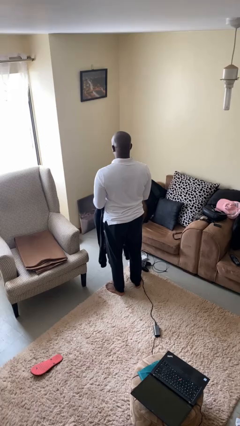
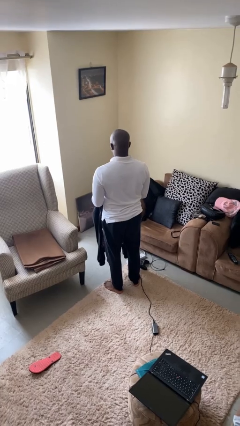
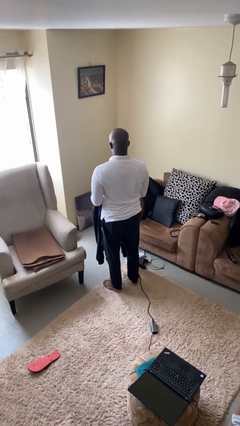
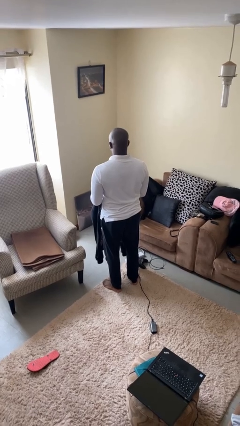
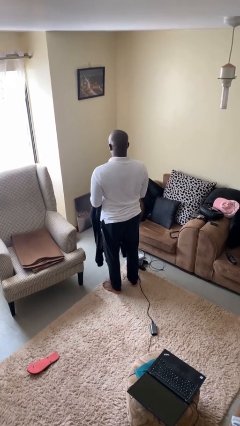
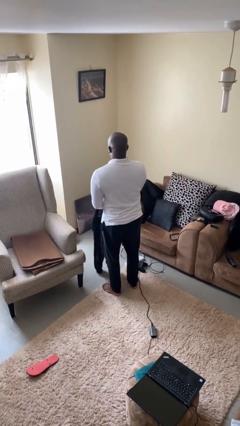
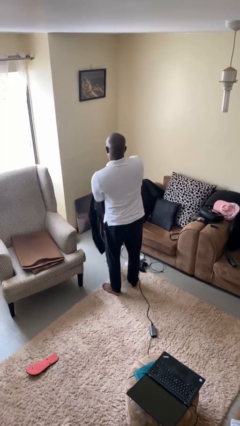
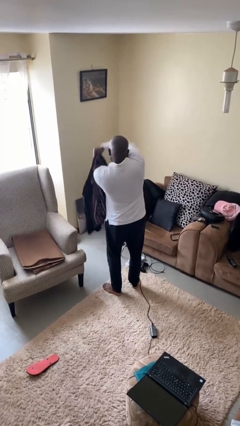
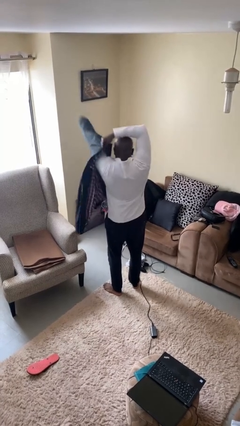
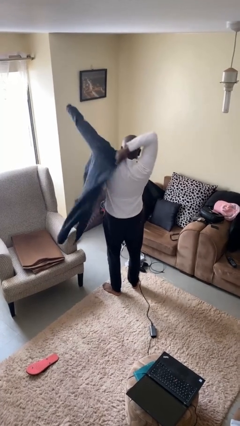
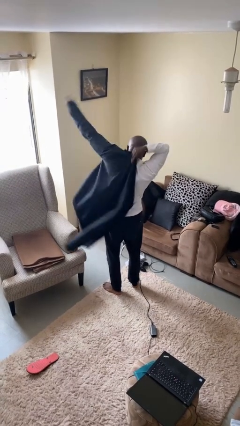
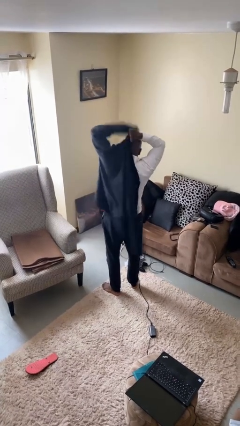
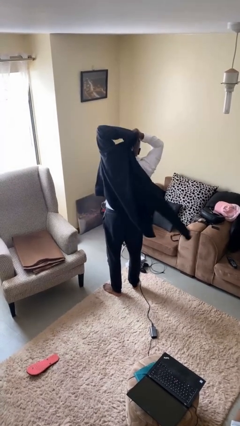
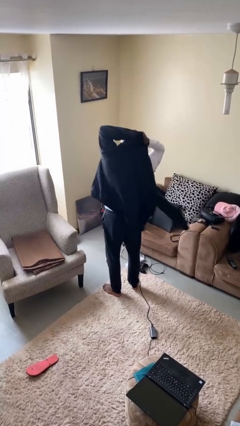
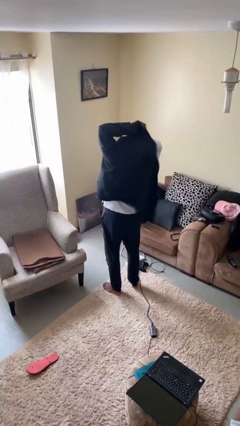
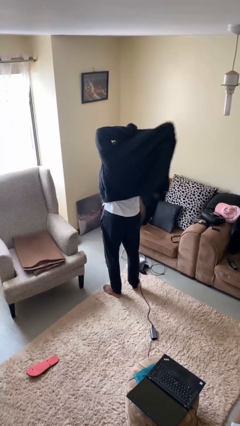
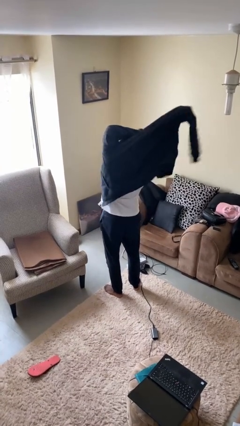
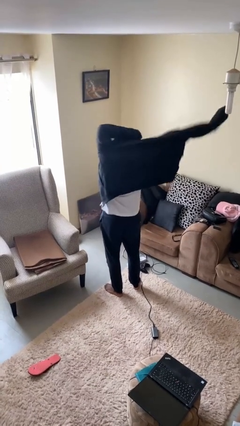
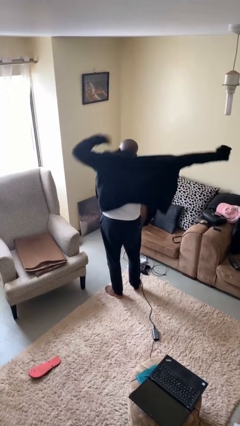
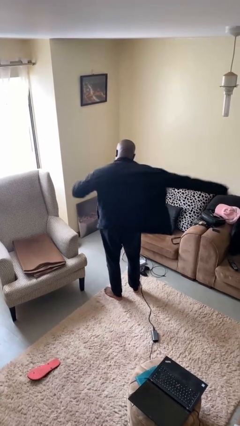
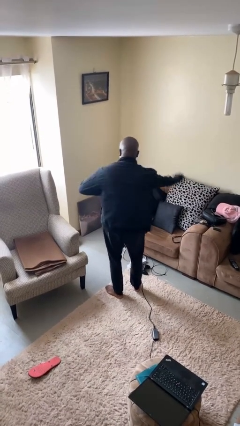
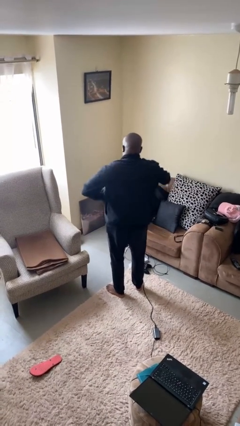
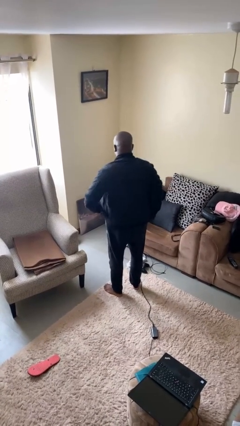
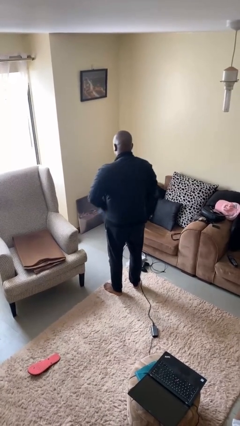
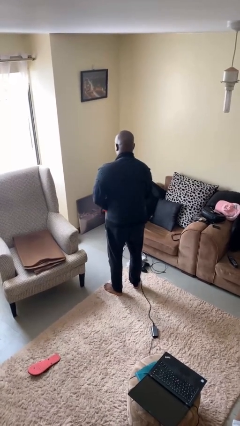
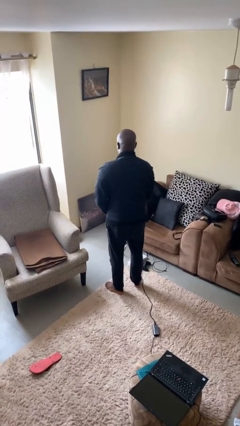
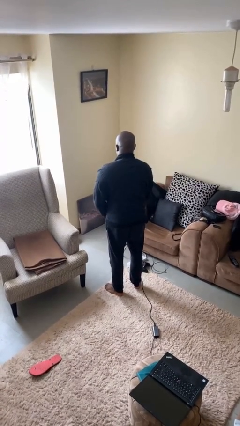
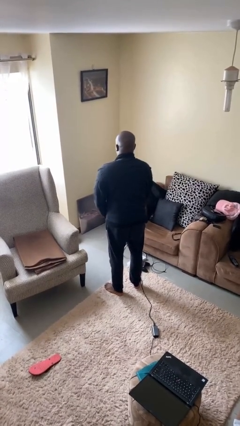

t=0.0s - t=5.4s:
person puts on jacket

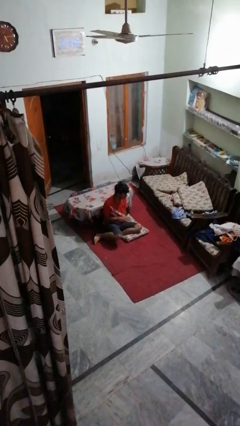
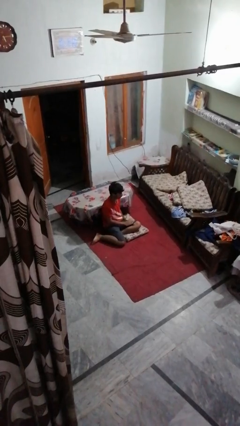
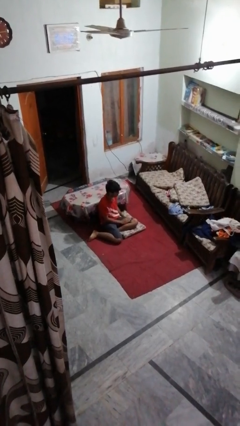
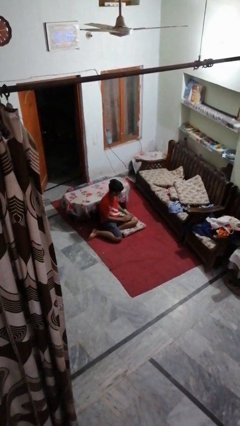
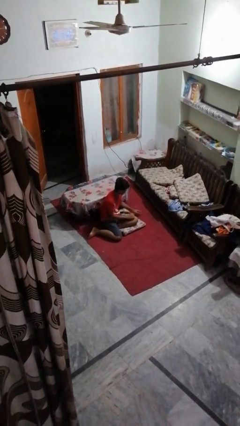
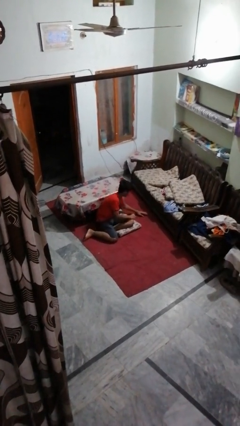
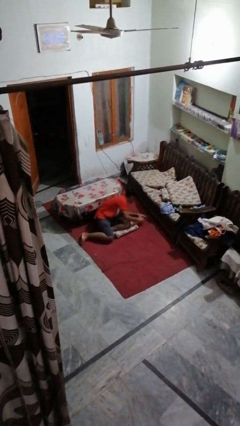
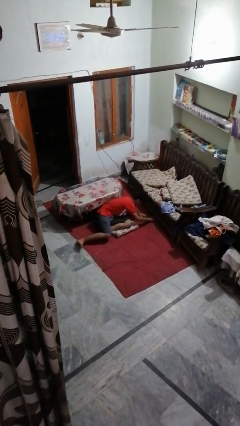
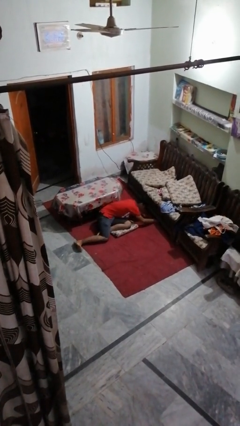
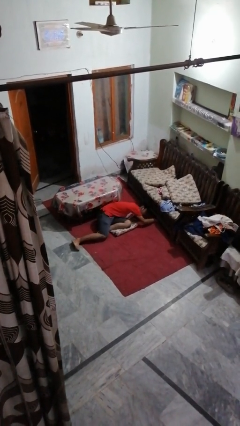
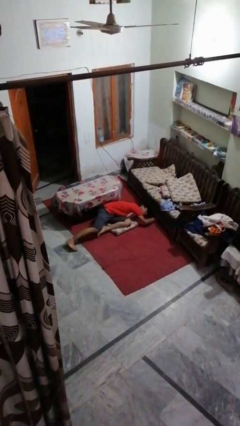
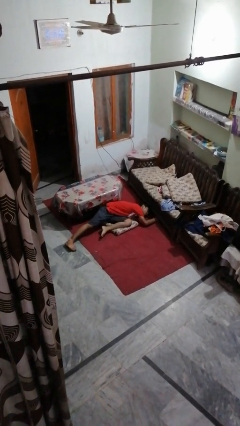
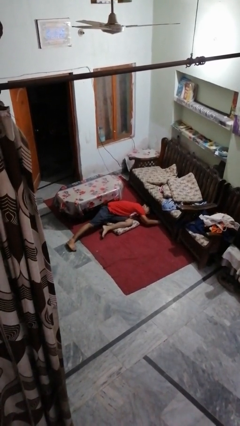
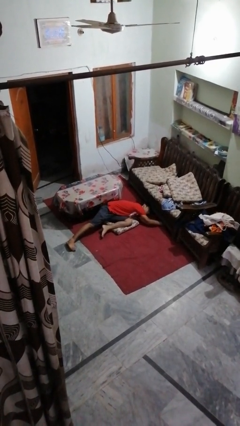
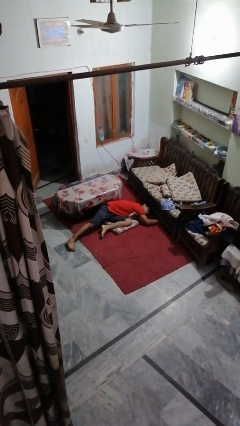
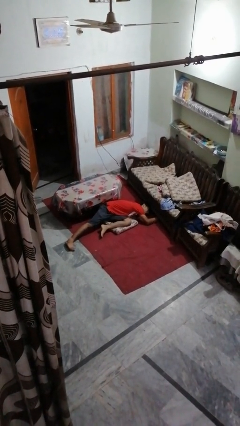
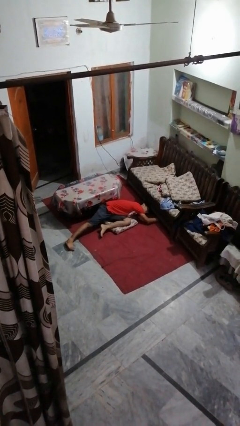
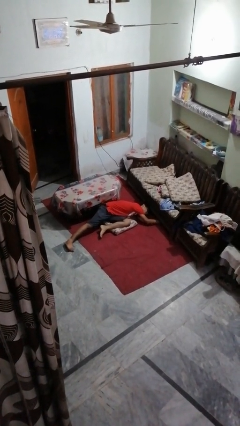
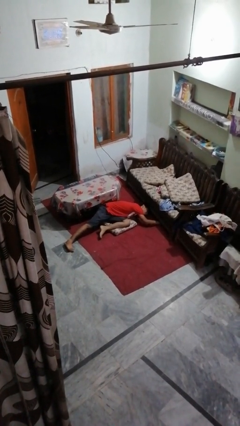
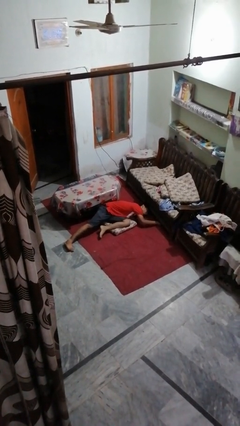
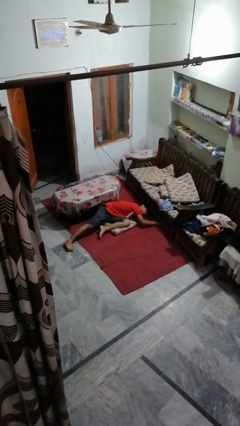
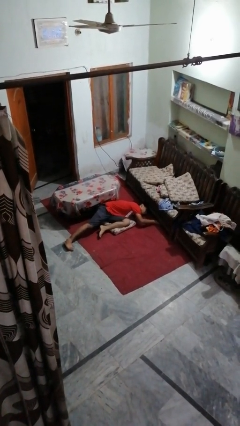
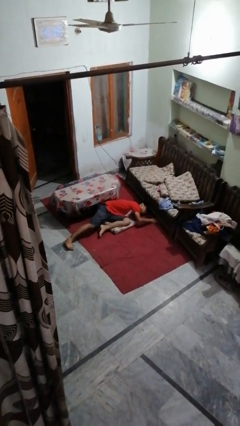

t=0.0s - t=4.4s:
person searches under couch

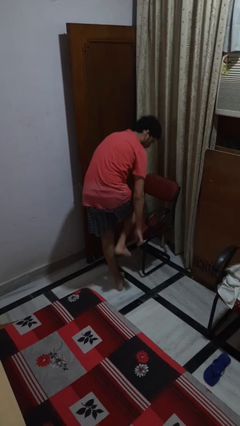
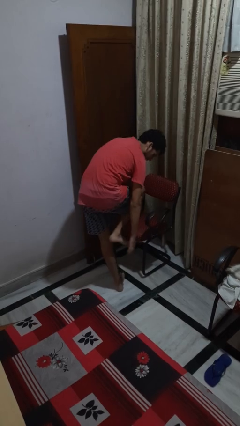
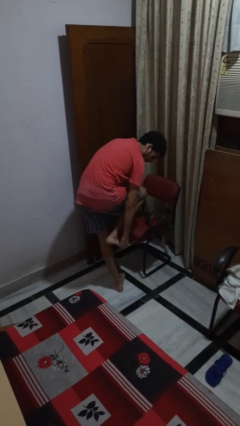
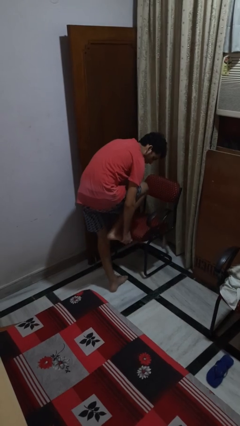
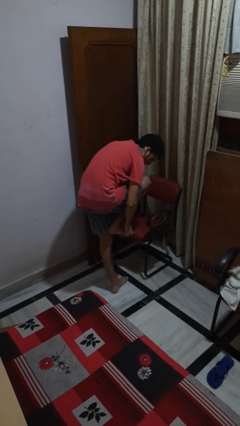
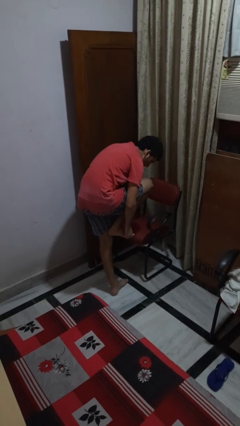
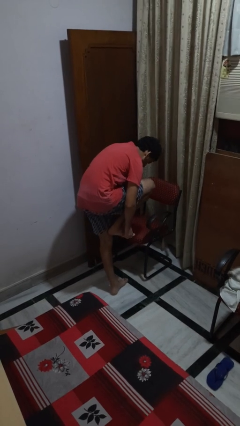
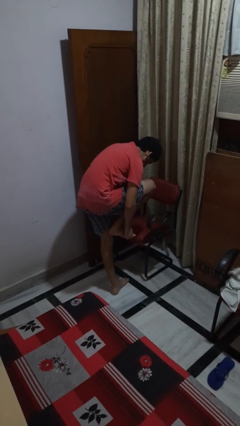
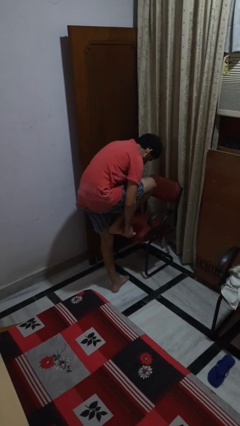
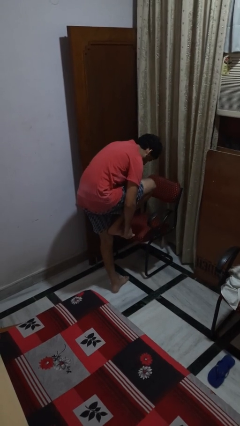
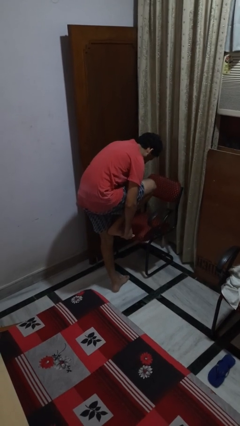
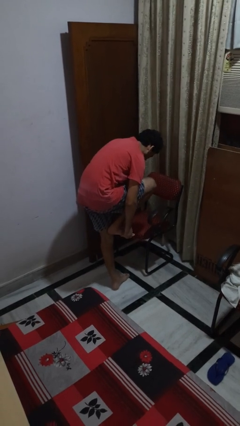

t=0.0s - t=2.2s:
person stubs toe

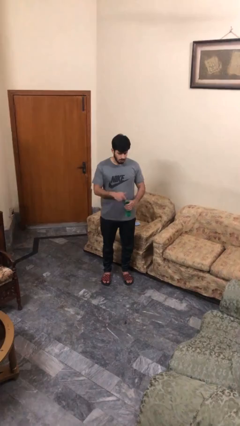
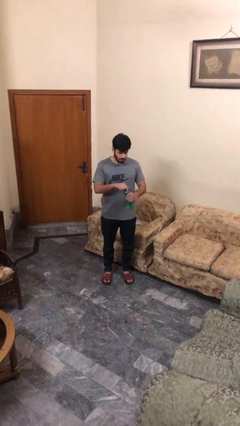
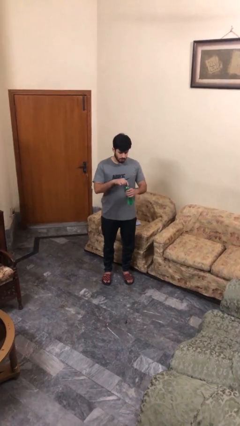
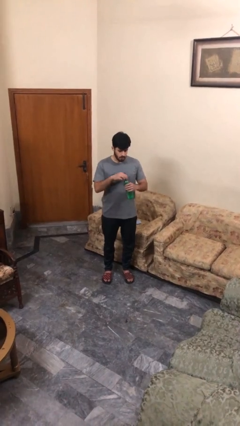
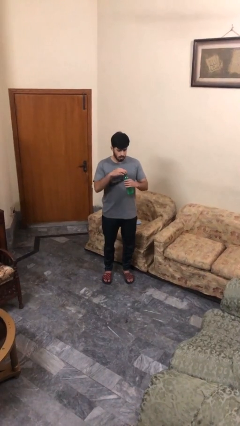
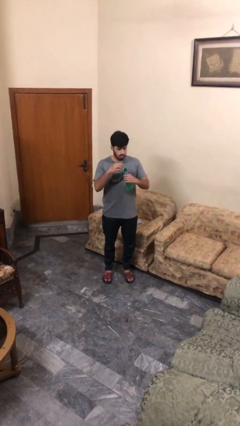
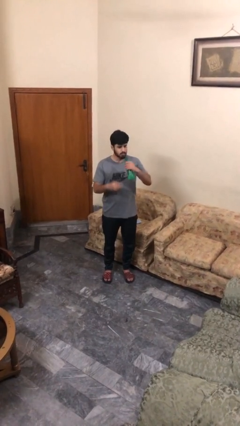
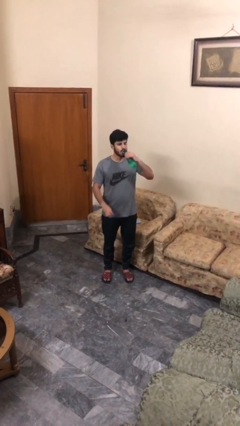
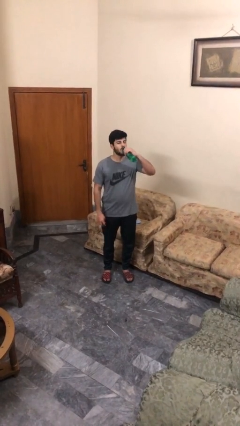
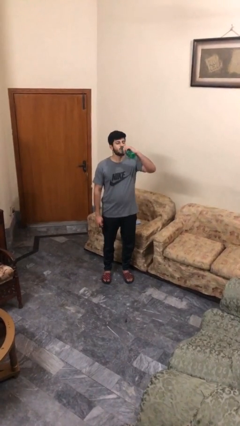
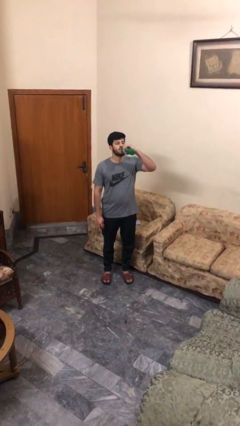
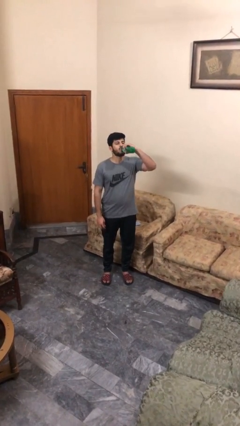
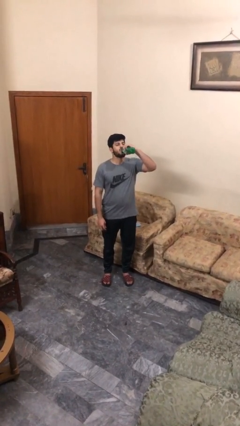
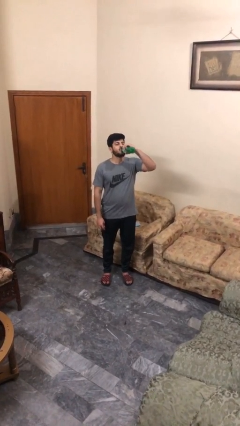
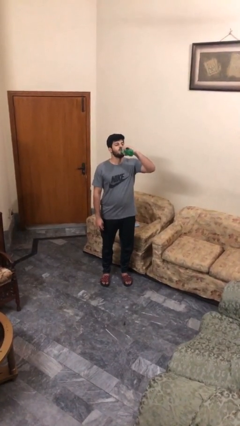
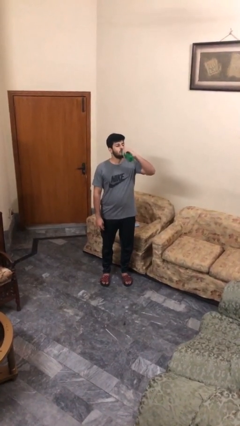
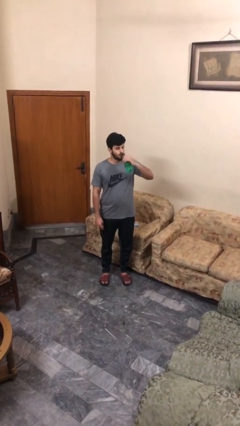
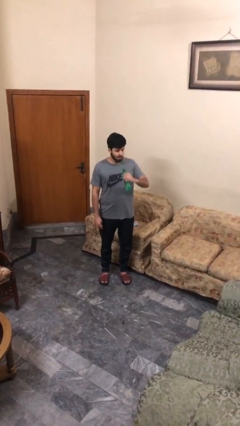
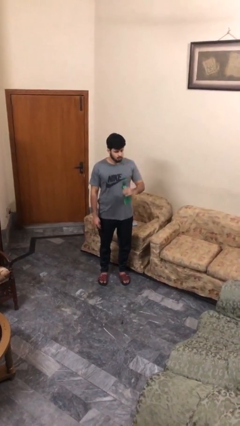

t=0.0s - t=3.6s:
person drinks from bottle

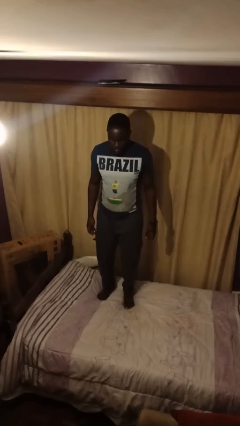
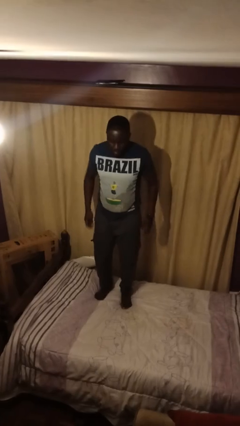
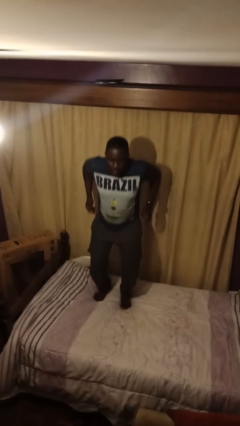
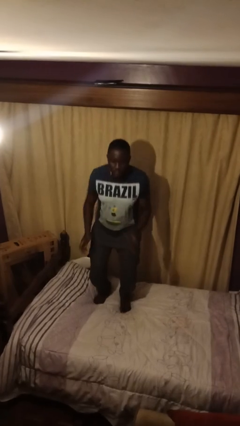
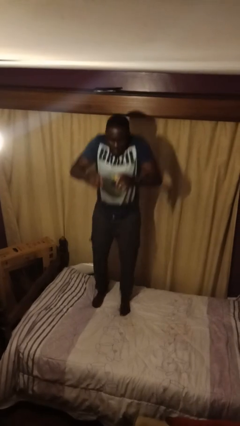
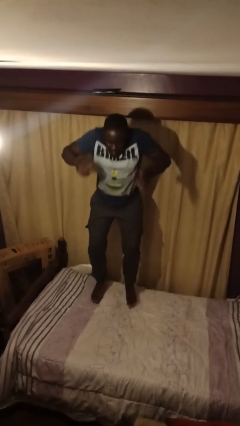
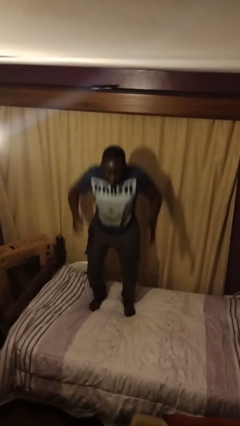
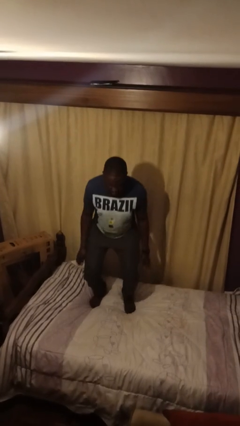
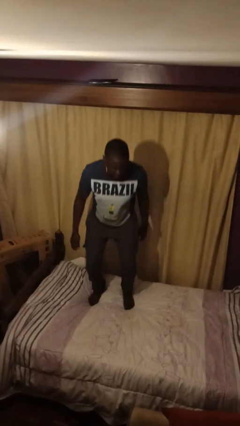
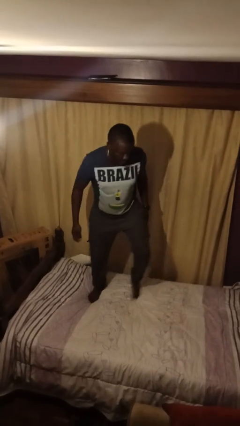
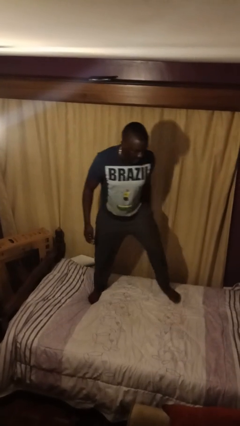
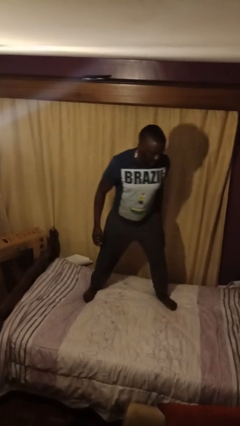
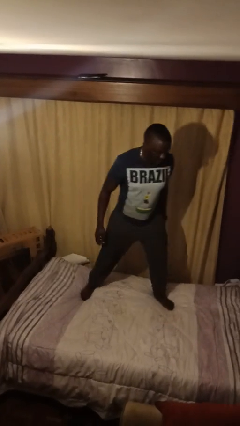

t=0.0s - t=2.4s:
person jumps on bed
